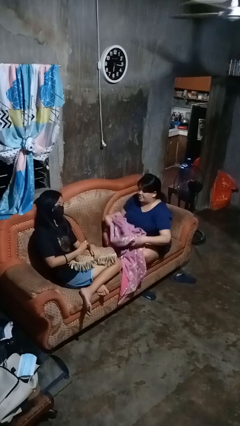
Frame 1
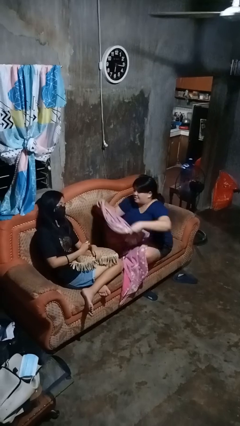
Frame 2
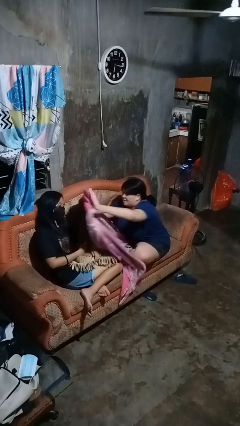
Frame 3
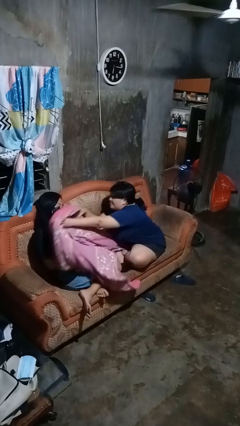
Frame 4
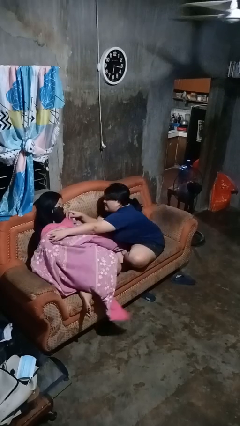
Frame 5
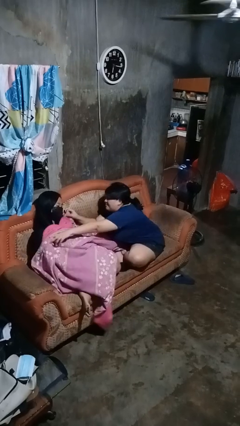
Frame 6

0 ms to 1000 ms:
person covers friend with blanket

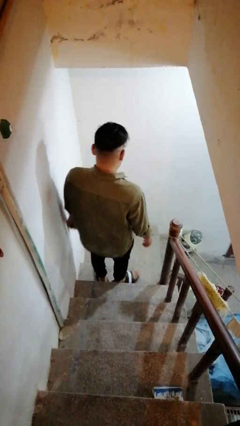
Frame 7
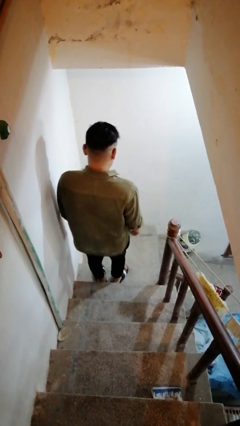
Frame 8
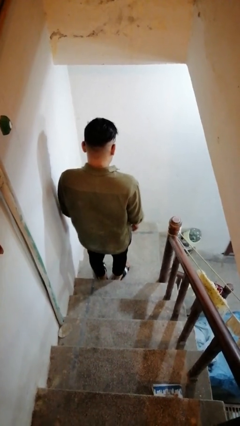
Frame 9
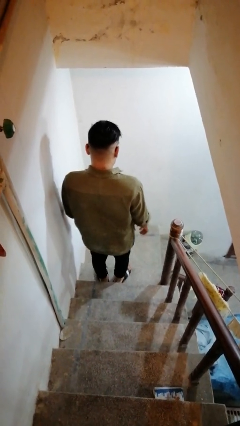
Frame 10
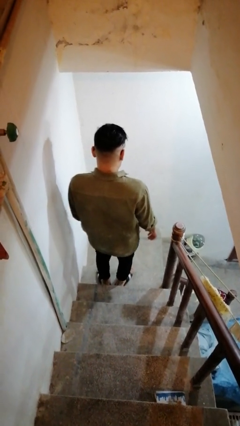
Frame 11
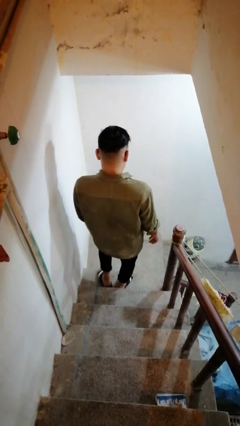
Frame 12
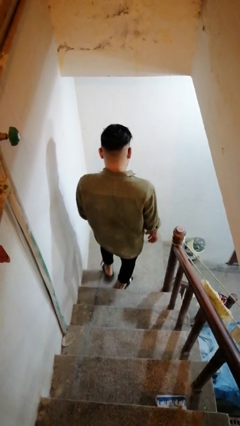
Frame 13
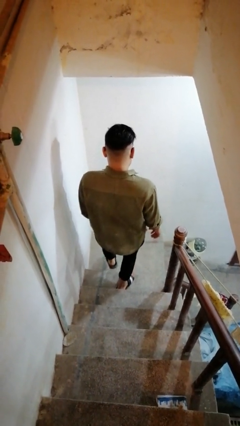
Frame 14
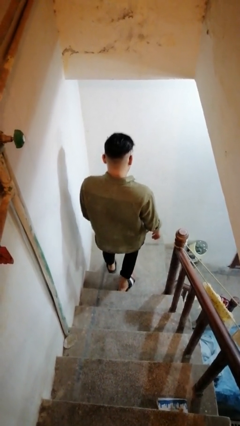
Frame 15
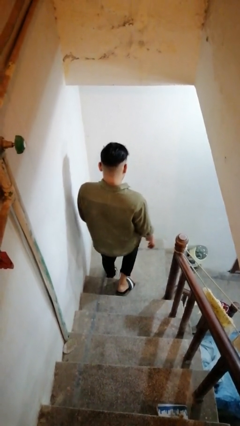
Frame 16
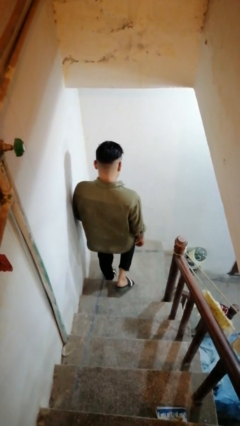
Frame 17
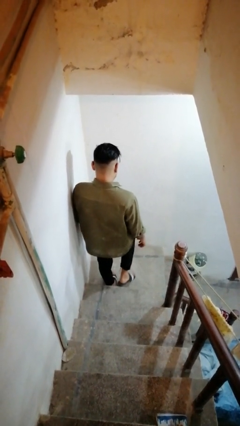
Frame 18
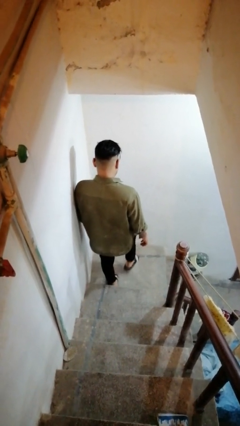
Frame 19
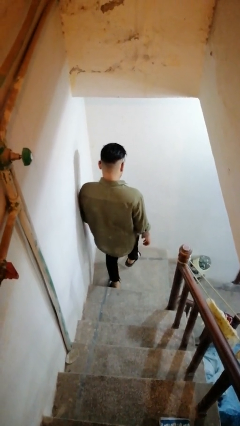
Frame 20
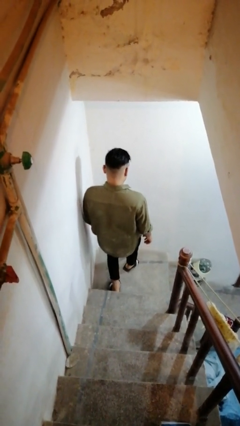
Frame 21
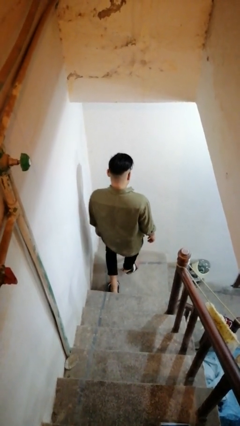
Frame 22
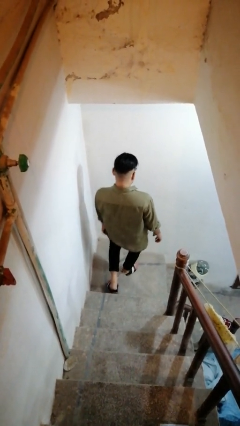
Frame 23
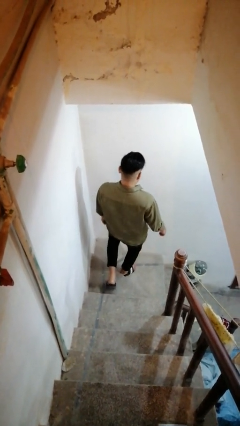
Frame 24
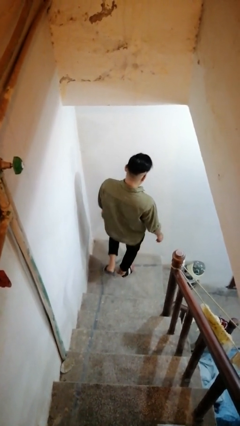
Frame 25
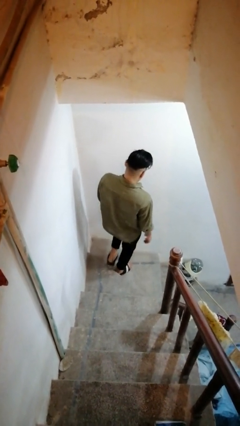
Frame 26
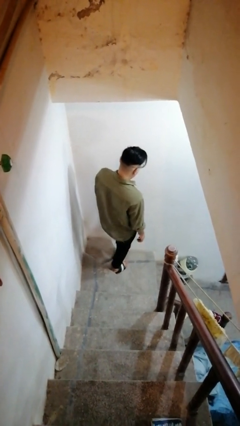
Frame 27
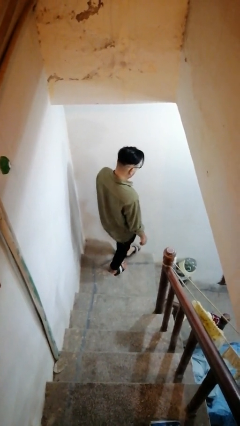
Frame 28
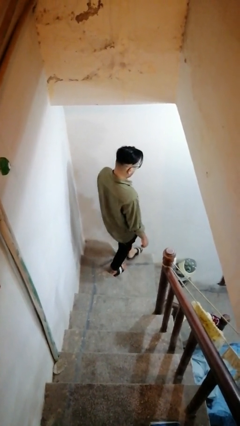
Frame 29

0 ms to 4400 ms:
person climbs down stairs

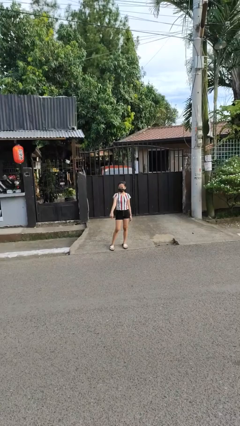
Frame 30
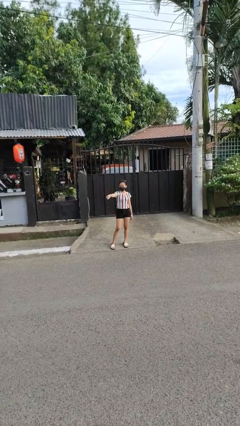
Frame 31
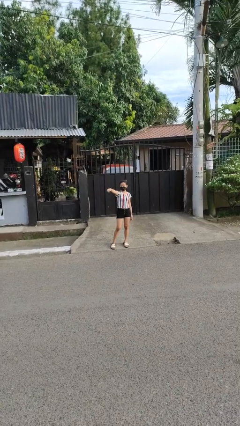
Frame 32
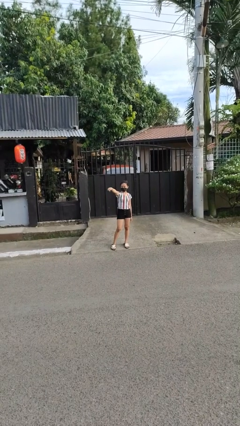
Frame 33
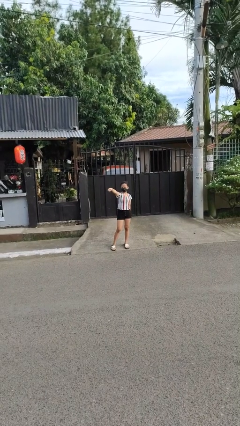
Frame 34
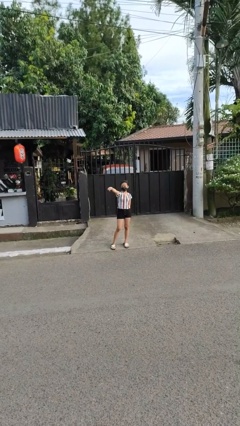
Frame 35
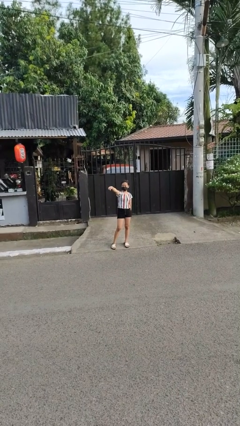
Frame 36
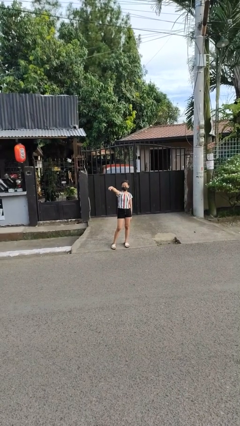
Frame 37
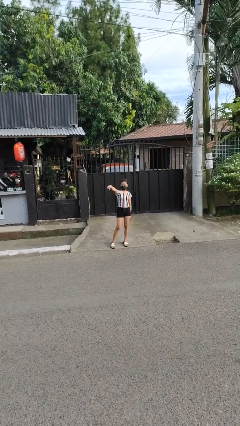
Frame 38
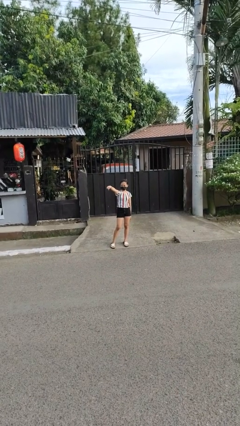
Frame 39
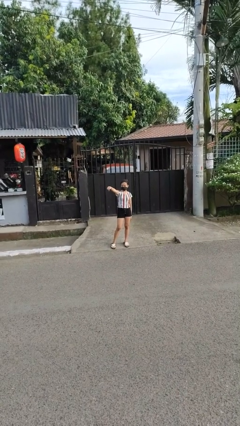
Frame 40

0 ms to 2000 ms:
person points at person

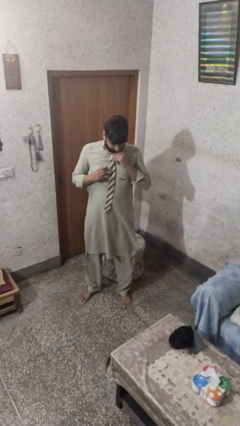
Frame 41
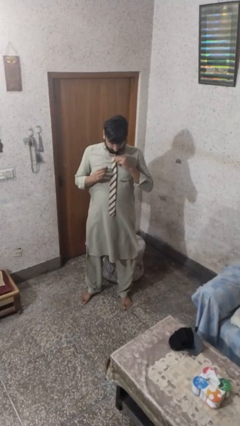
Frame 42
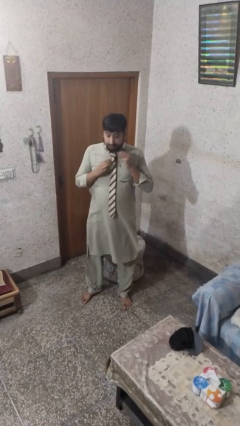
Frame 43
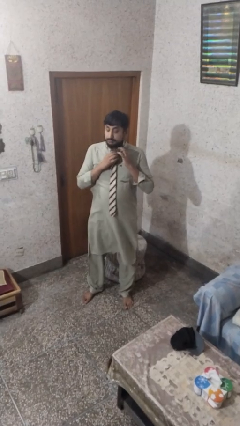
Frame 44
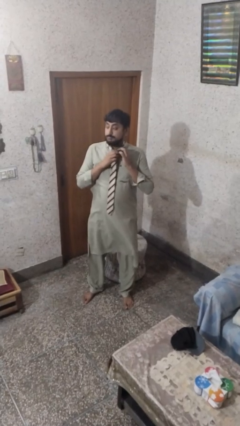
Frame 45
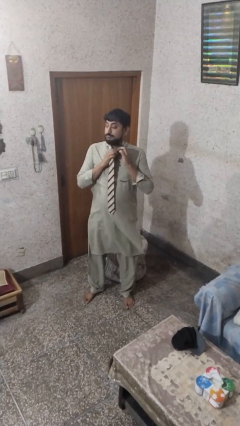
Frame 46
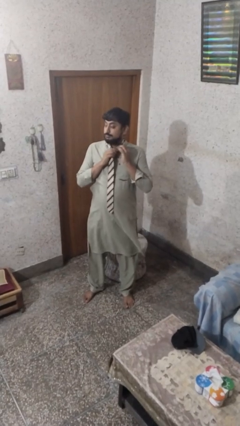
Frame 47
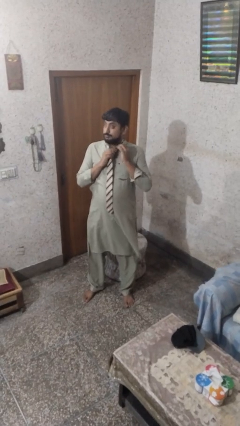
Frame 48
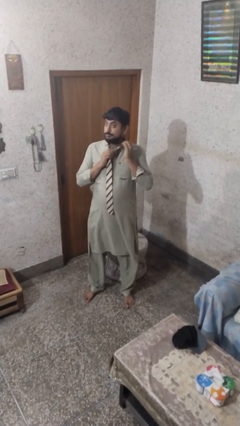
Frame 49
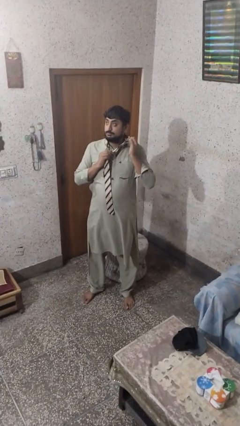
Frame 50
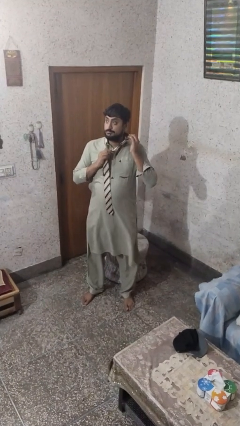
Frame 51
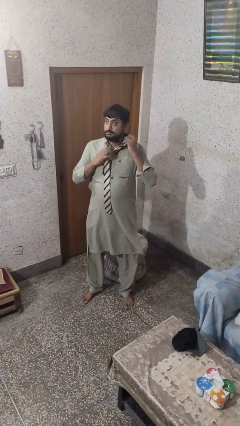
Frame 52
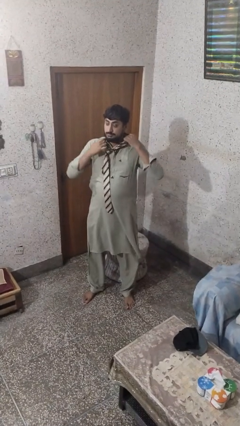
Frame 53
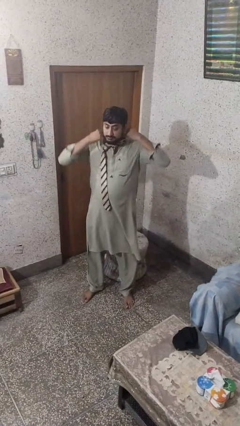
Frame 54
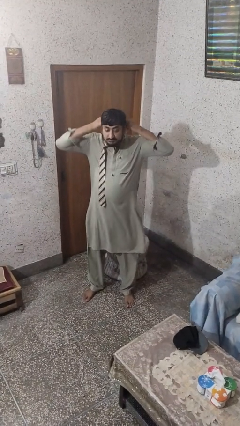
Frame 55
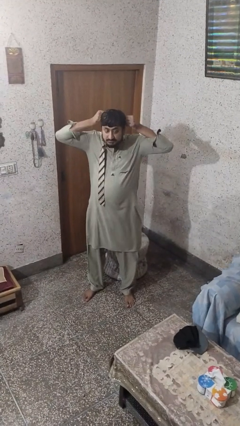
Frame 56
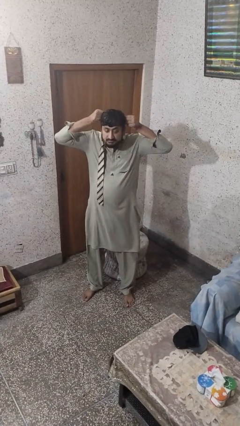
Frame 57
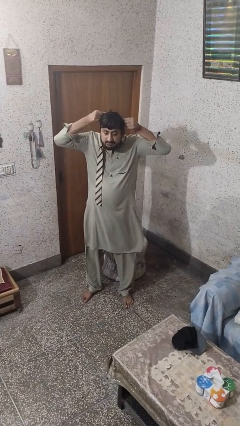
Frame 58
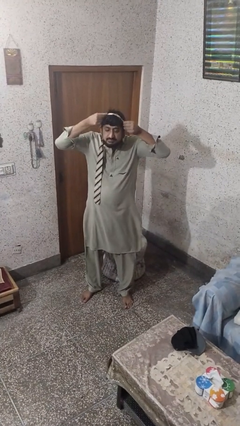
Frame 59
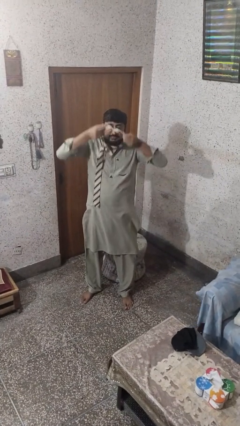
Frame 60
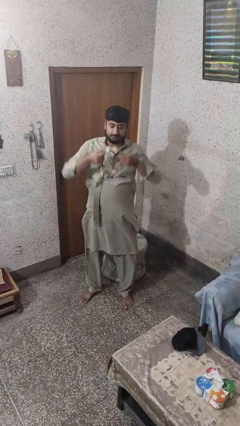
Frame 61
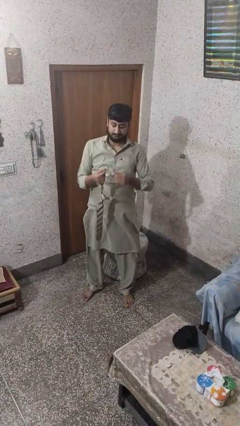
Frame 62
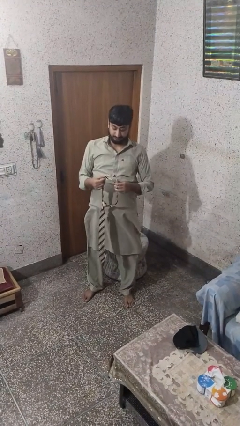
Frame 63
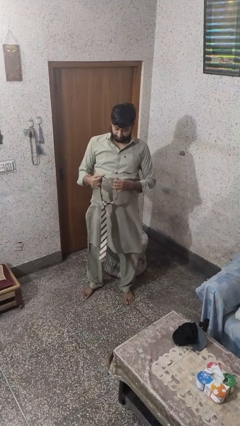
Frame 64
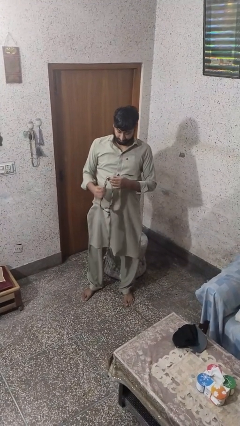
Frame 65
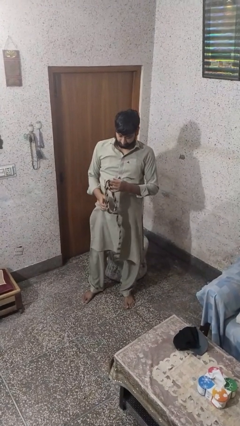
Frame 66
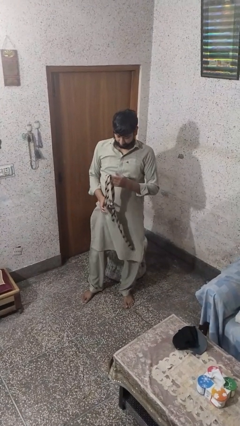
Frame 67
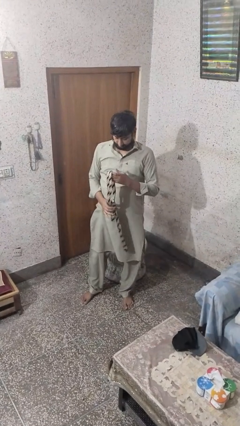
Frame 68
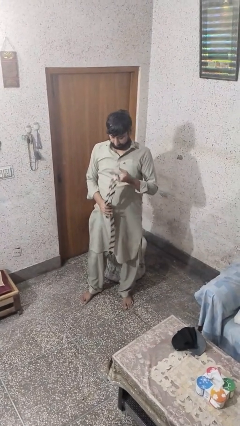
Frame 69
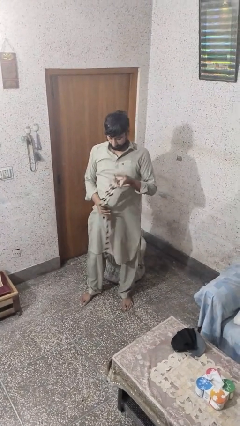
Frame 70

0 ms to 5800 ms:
person takes off necktie

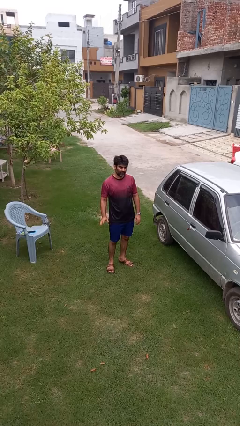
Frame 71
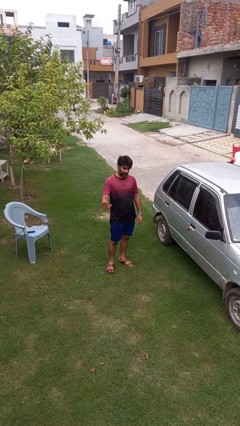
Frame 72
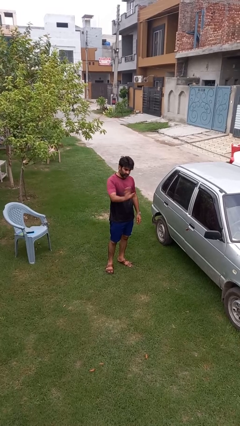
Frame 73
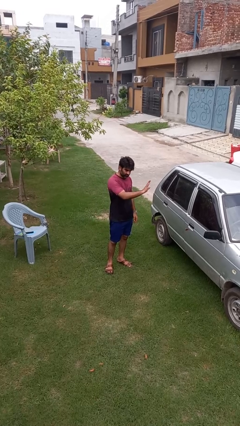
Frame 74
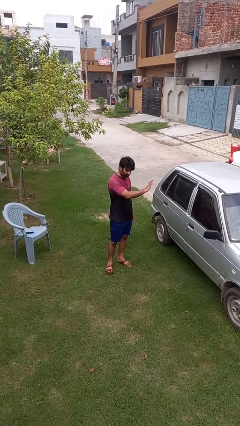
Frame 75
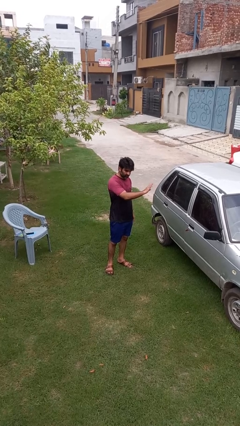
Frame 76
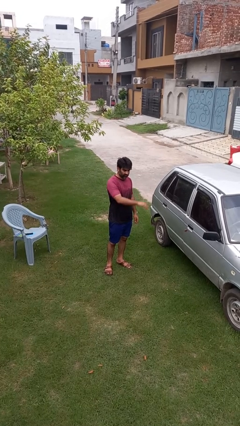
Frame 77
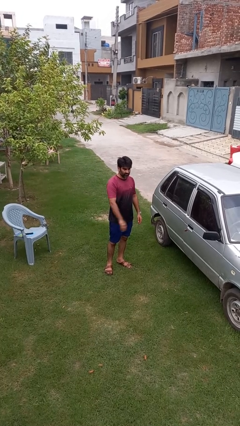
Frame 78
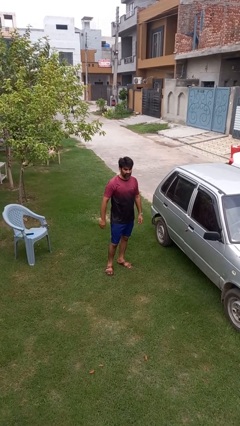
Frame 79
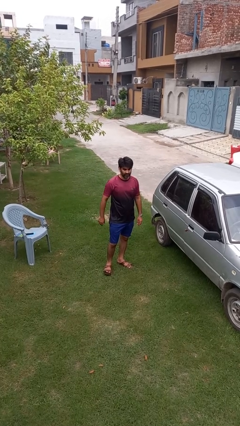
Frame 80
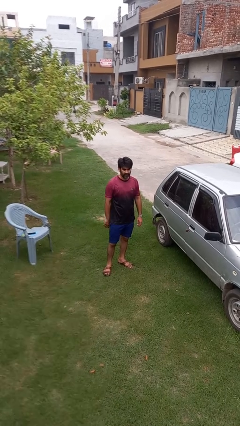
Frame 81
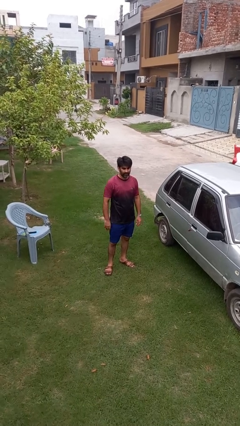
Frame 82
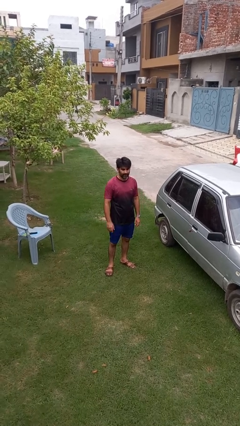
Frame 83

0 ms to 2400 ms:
person gestures swipe left

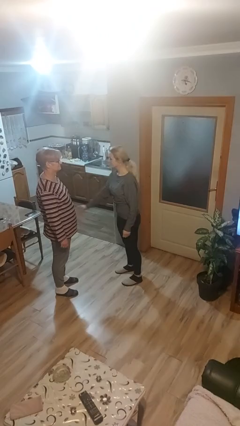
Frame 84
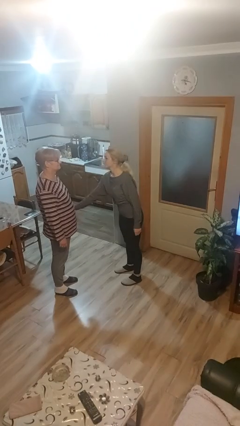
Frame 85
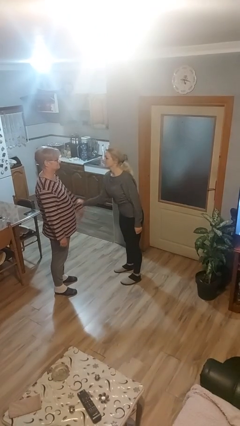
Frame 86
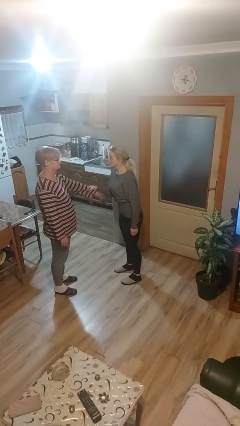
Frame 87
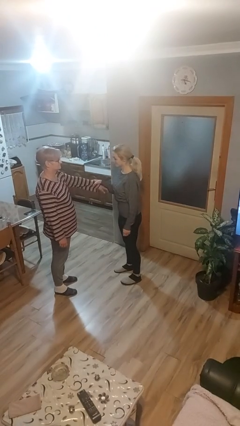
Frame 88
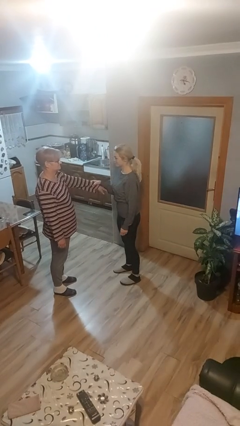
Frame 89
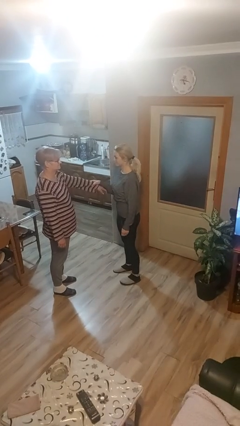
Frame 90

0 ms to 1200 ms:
person grabs person by forearm

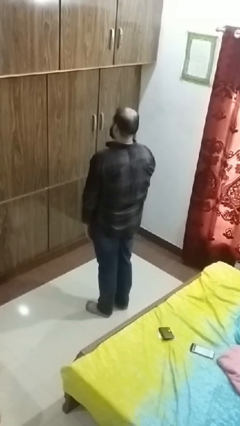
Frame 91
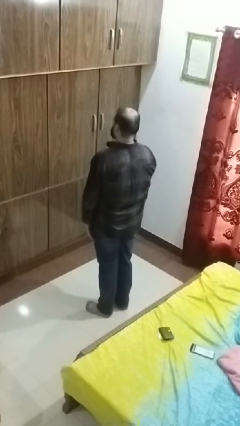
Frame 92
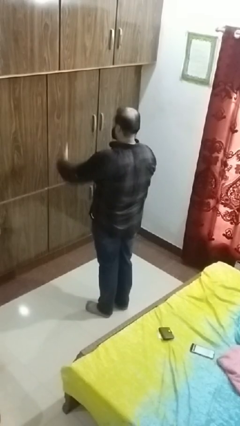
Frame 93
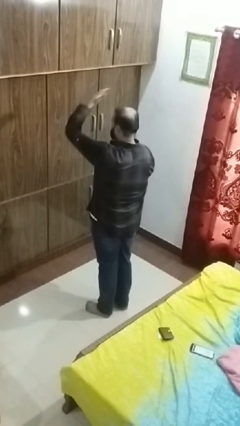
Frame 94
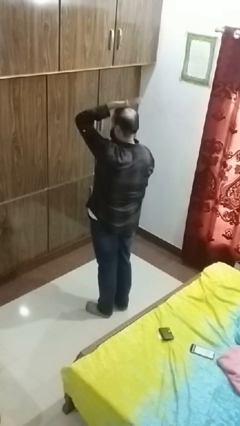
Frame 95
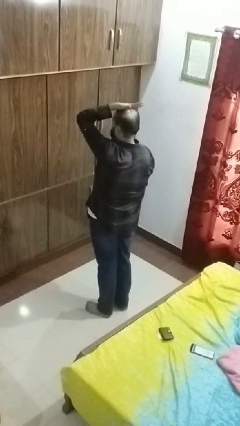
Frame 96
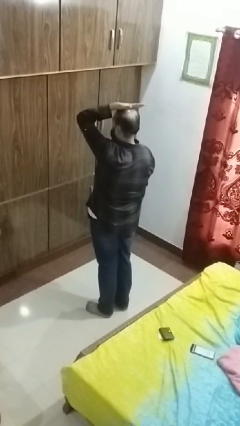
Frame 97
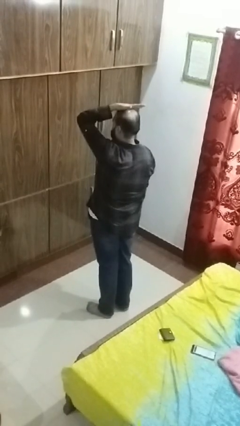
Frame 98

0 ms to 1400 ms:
person pats head
